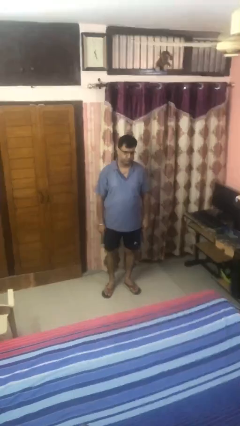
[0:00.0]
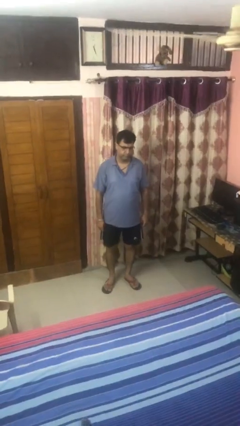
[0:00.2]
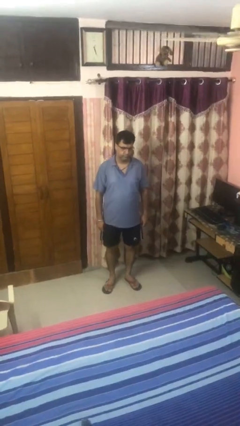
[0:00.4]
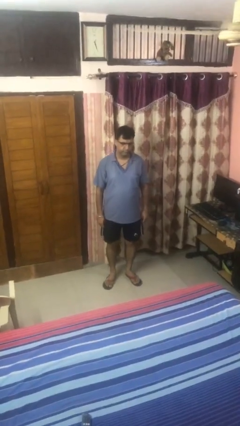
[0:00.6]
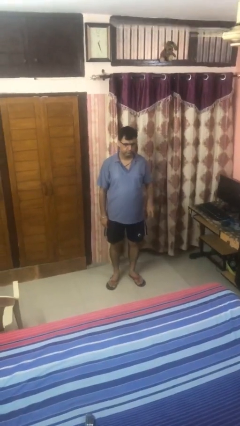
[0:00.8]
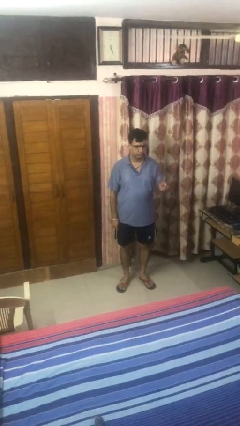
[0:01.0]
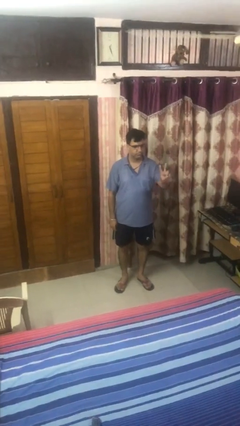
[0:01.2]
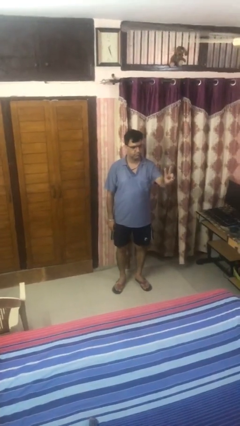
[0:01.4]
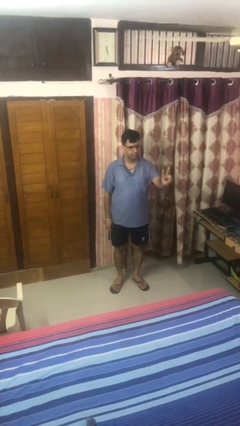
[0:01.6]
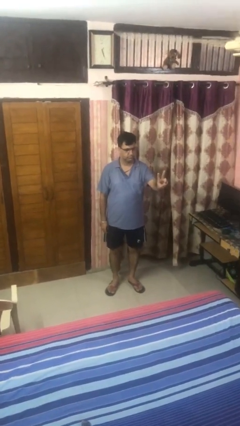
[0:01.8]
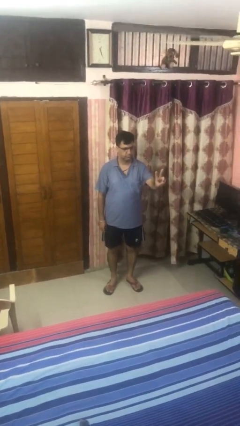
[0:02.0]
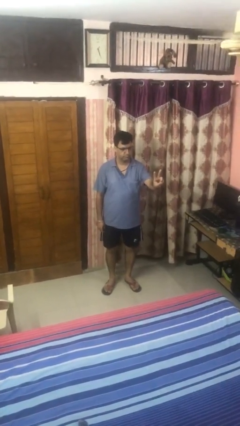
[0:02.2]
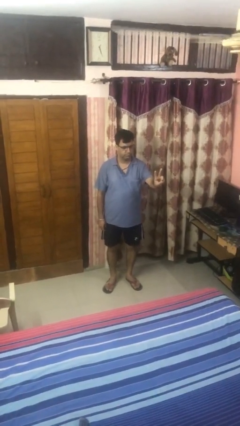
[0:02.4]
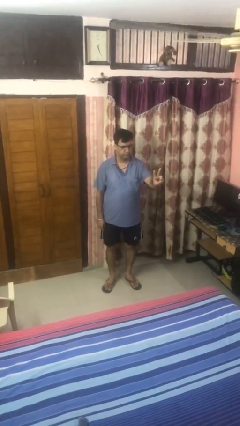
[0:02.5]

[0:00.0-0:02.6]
person gestures peace

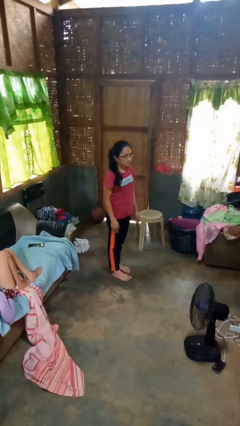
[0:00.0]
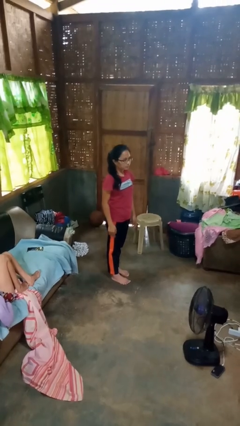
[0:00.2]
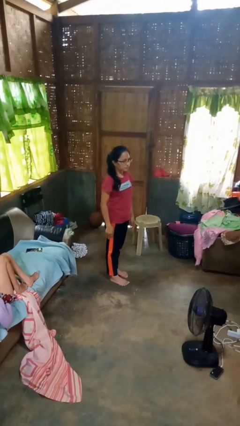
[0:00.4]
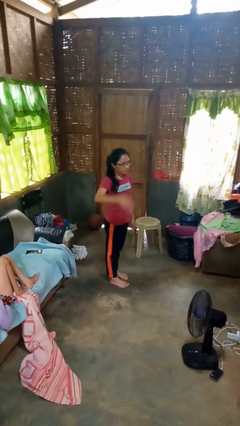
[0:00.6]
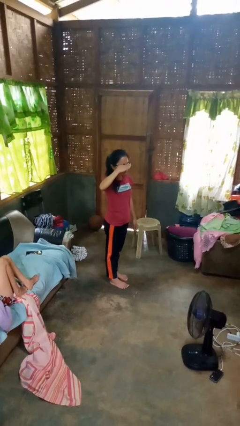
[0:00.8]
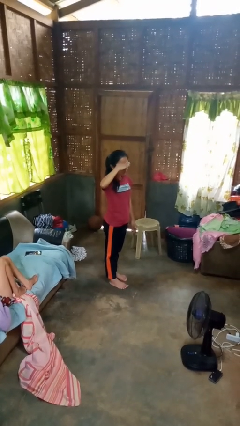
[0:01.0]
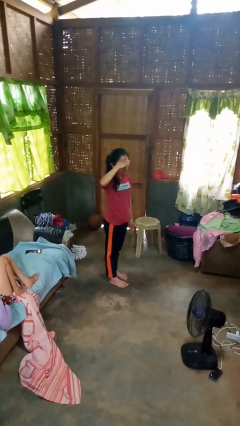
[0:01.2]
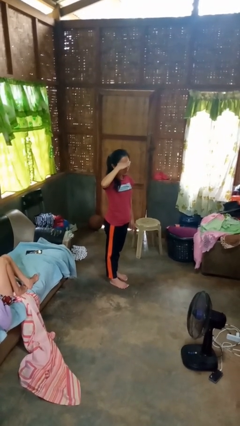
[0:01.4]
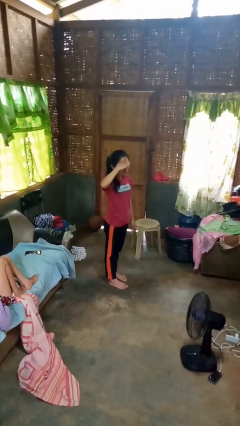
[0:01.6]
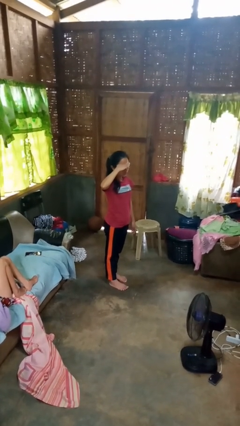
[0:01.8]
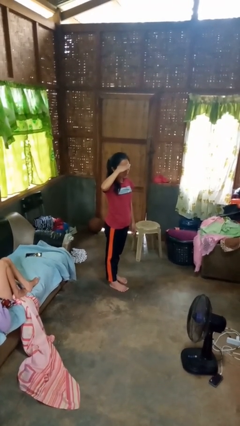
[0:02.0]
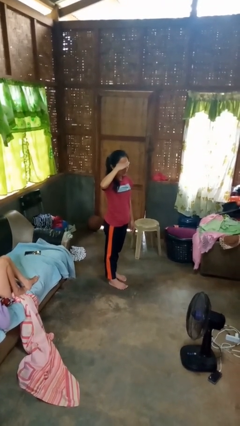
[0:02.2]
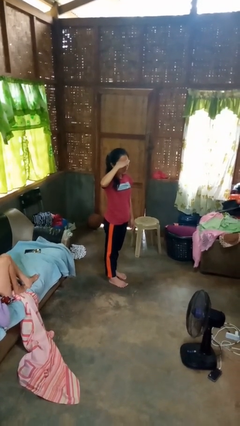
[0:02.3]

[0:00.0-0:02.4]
person salutes

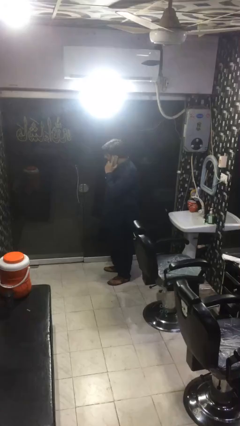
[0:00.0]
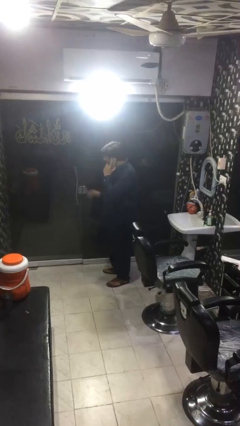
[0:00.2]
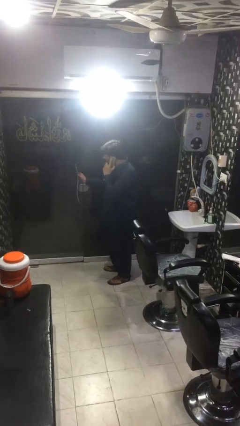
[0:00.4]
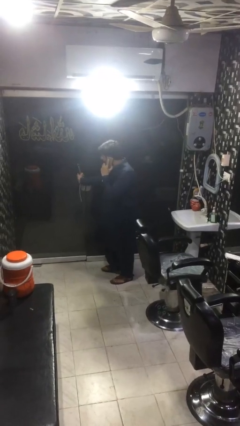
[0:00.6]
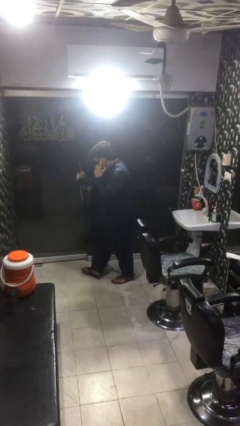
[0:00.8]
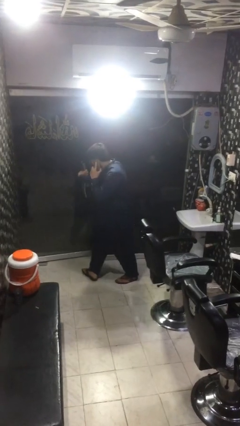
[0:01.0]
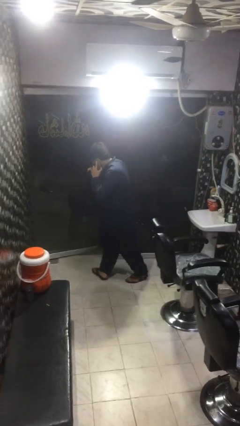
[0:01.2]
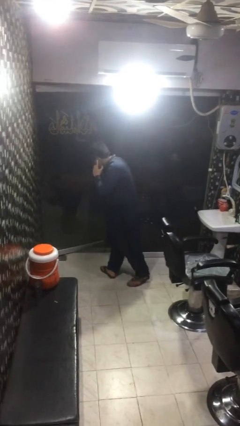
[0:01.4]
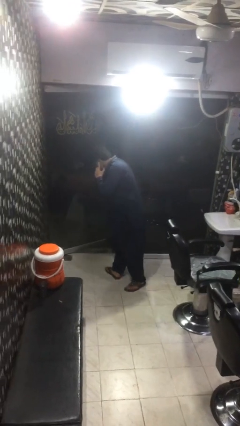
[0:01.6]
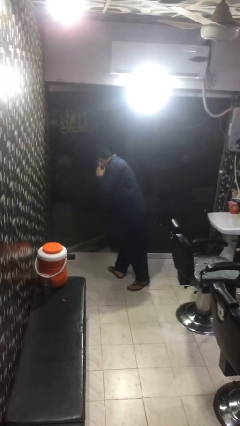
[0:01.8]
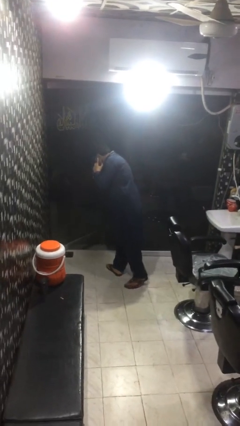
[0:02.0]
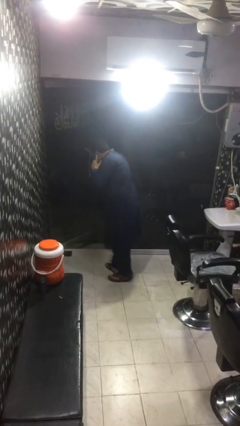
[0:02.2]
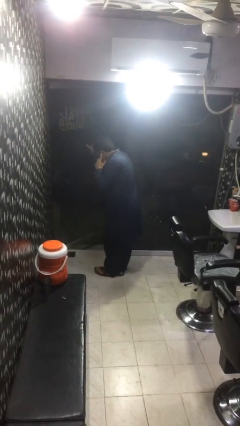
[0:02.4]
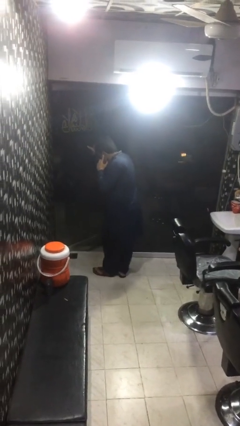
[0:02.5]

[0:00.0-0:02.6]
person opens facility door

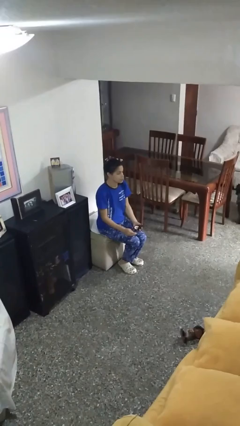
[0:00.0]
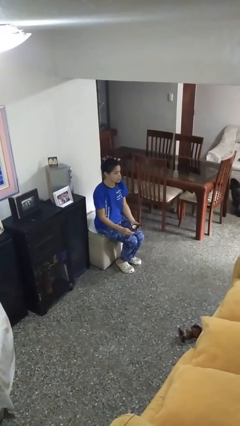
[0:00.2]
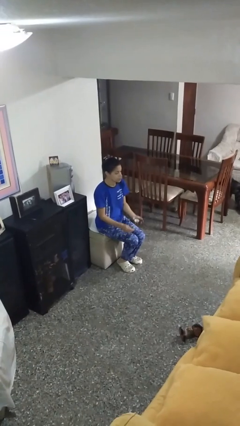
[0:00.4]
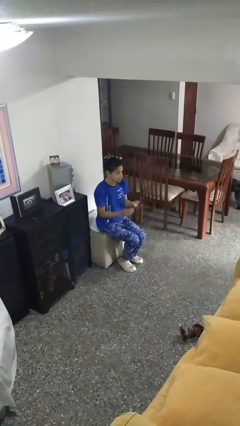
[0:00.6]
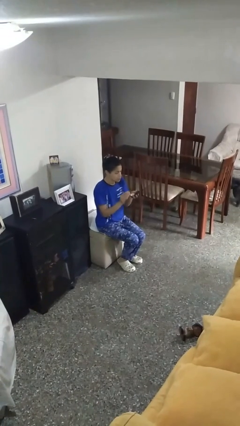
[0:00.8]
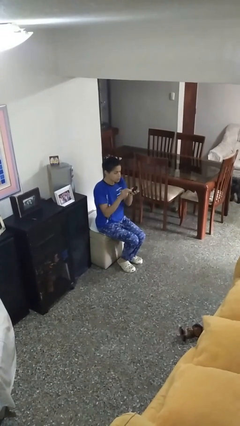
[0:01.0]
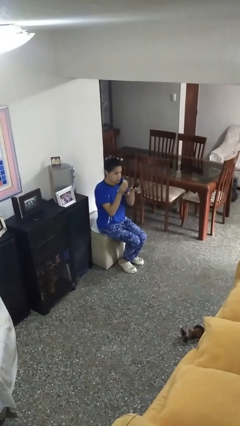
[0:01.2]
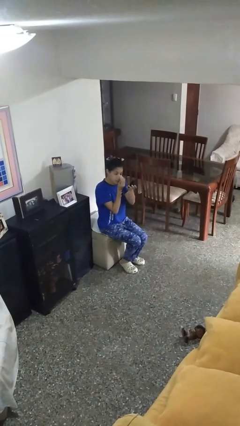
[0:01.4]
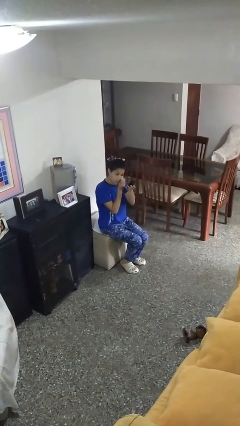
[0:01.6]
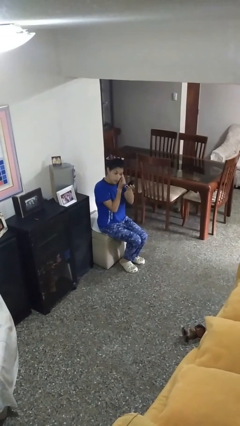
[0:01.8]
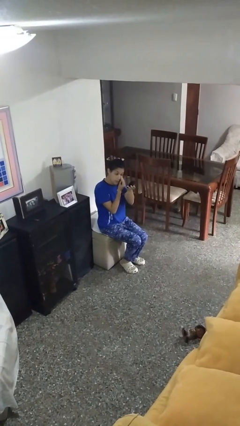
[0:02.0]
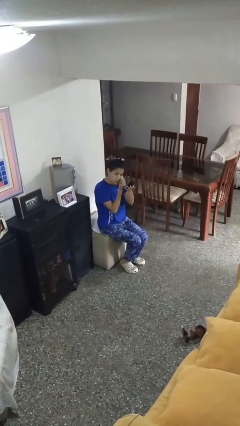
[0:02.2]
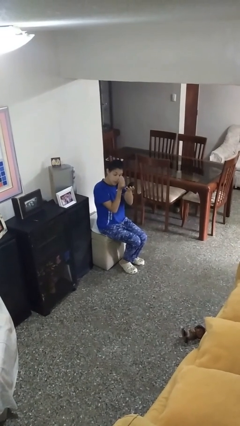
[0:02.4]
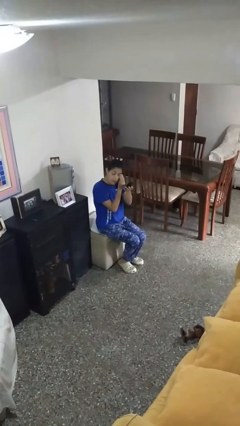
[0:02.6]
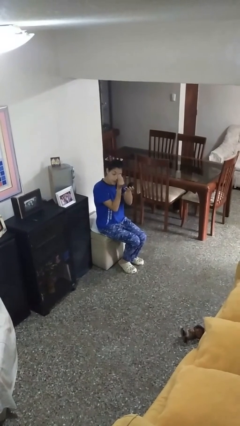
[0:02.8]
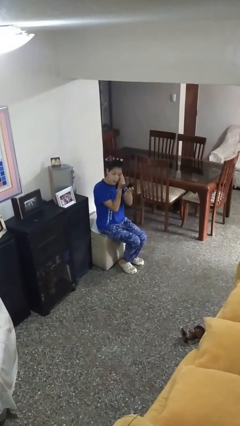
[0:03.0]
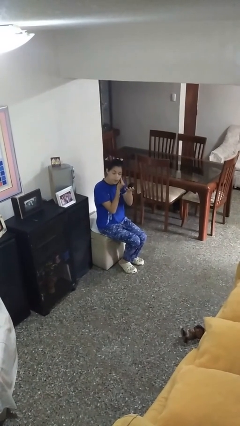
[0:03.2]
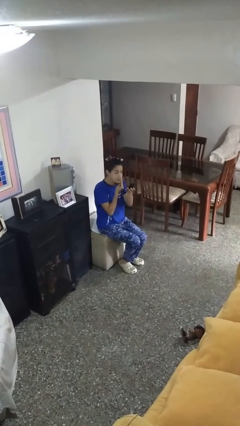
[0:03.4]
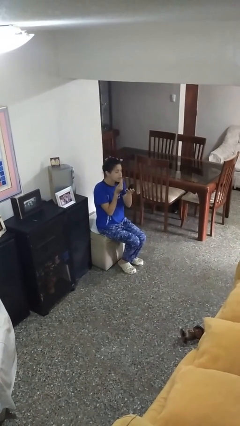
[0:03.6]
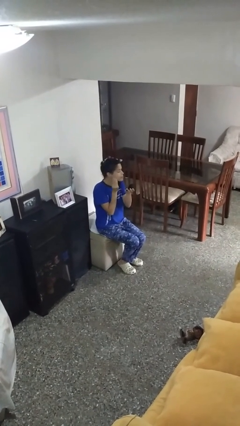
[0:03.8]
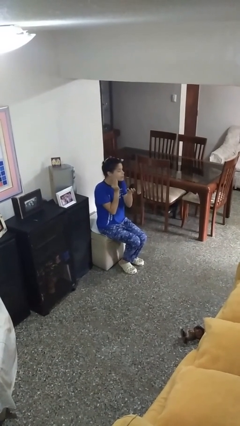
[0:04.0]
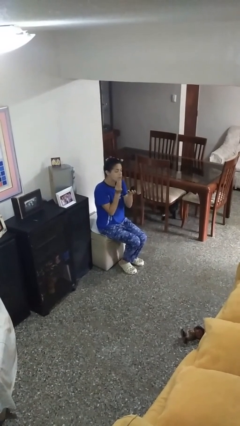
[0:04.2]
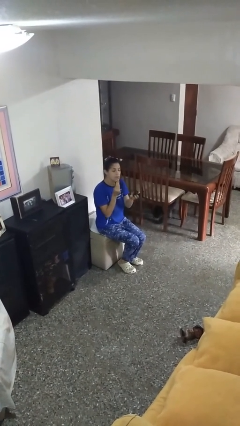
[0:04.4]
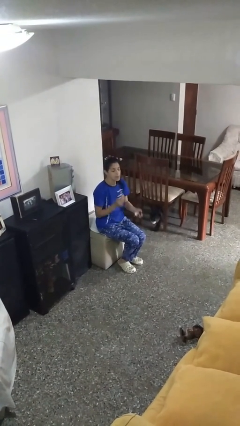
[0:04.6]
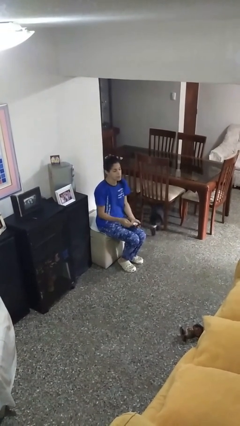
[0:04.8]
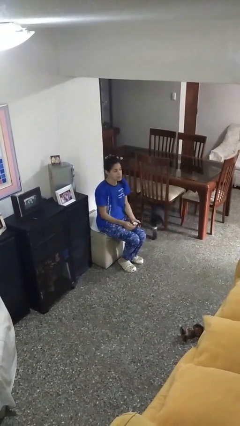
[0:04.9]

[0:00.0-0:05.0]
person applies foundation makeup

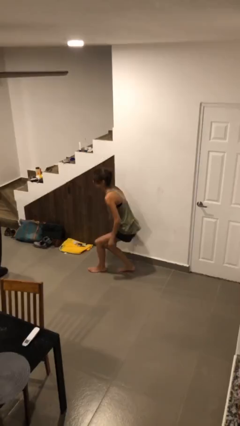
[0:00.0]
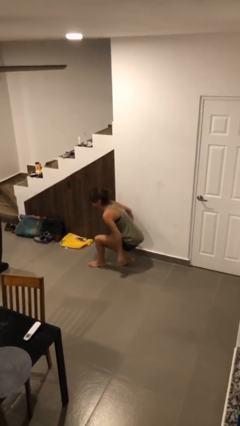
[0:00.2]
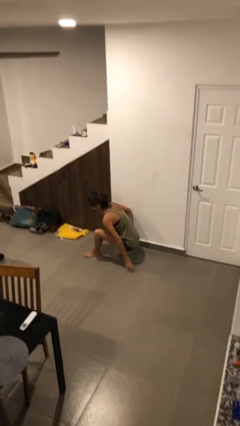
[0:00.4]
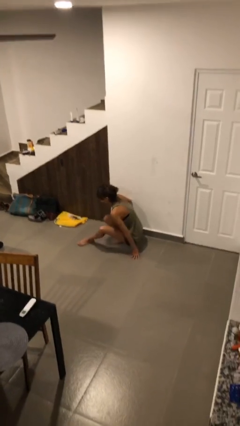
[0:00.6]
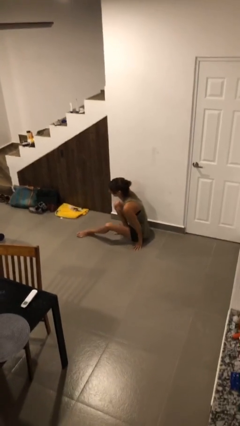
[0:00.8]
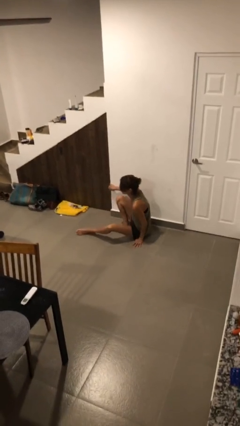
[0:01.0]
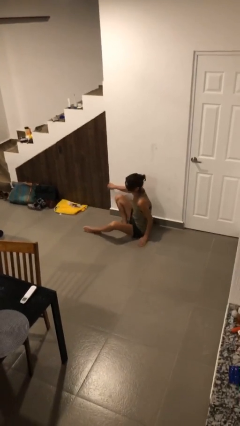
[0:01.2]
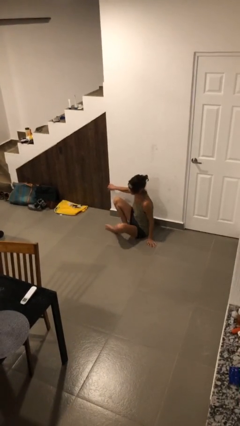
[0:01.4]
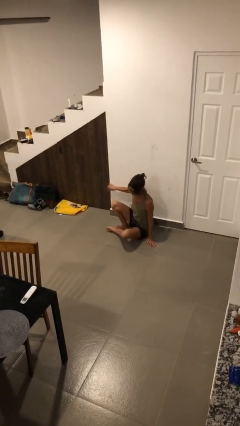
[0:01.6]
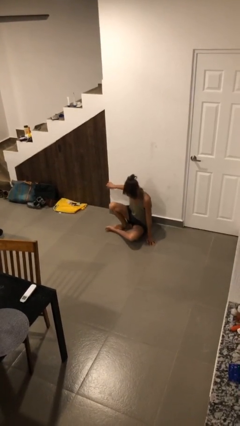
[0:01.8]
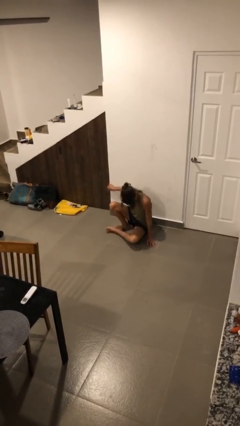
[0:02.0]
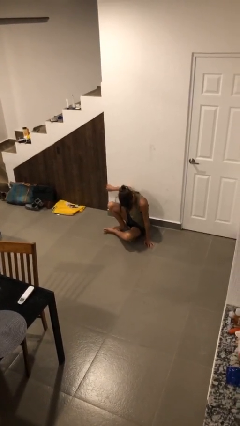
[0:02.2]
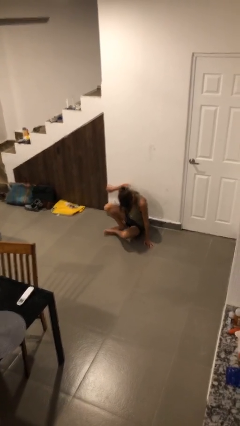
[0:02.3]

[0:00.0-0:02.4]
person sits down

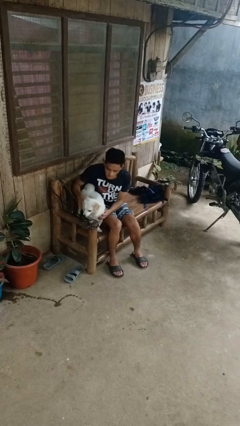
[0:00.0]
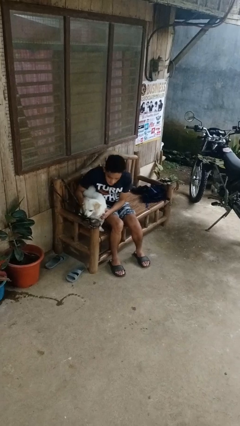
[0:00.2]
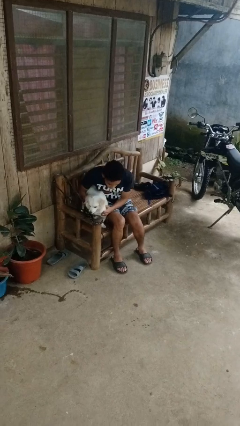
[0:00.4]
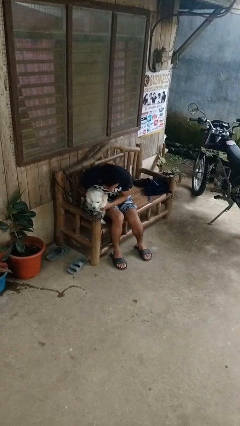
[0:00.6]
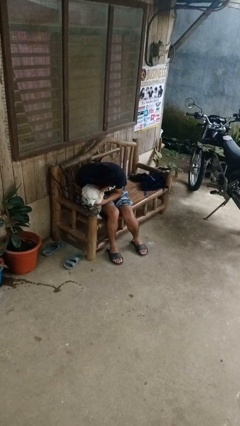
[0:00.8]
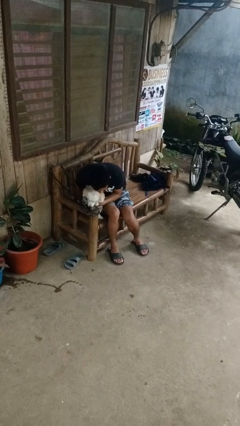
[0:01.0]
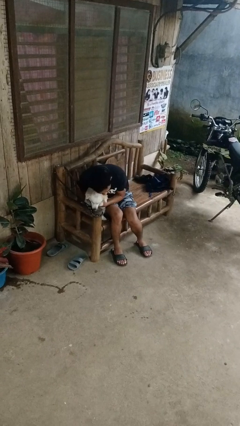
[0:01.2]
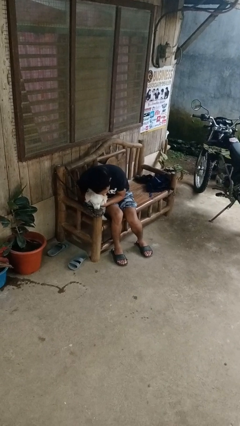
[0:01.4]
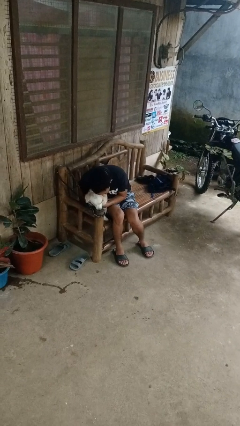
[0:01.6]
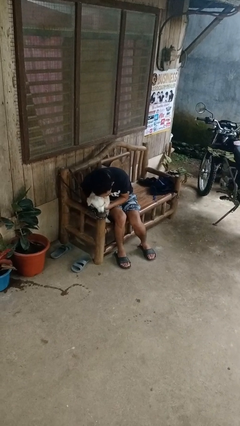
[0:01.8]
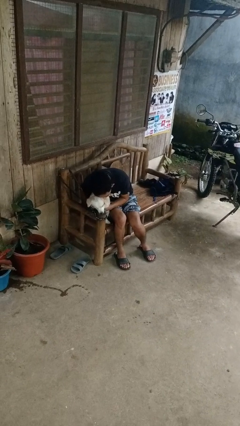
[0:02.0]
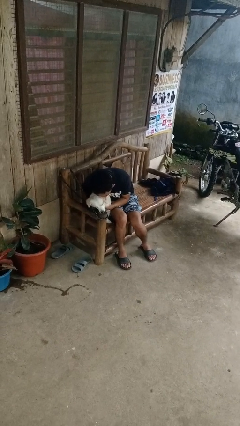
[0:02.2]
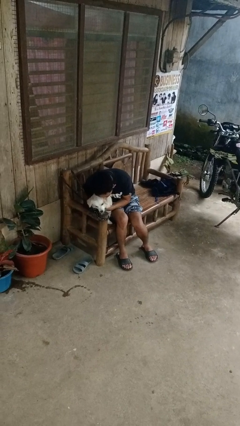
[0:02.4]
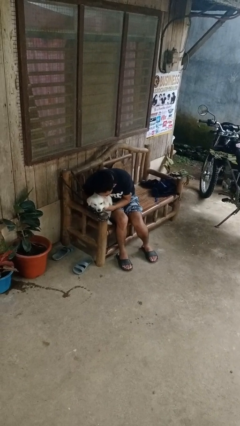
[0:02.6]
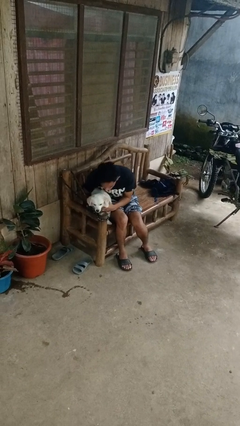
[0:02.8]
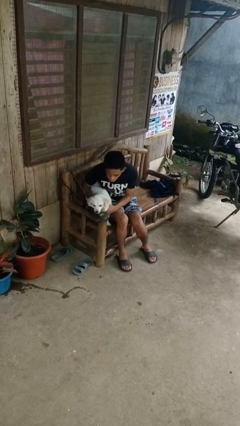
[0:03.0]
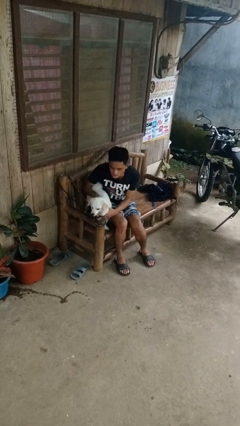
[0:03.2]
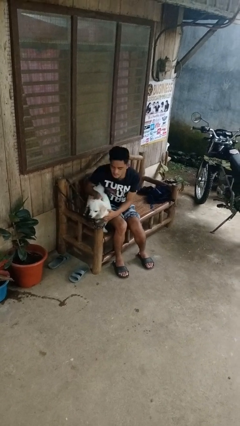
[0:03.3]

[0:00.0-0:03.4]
person hugs dog
